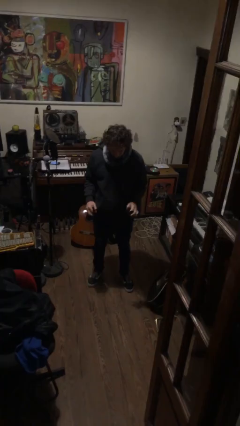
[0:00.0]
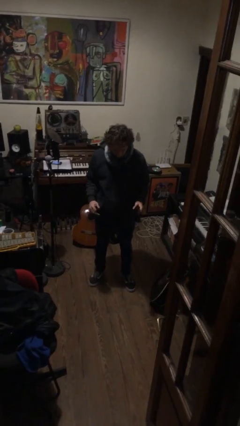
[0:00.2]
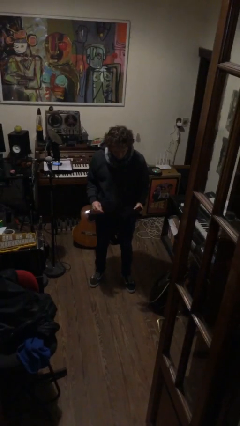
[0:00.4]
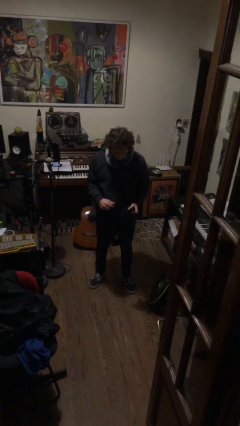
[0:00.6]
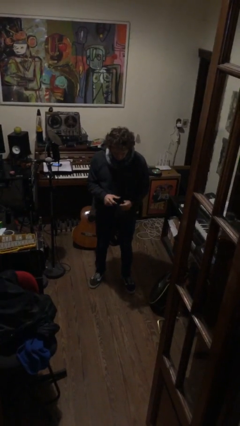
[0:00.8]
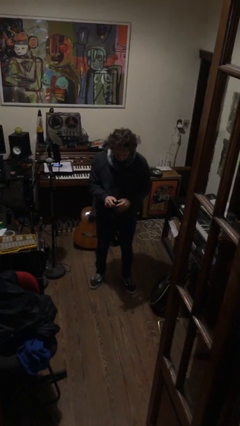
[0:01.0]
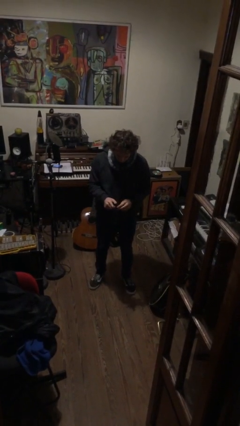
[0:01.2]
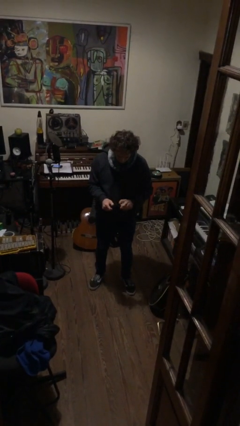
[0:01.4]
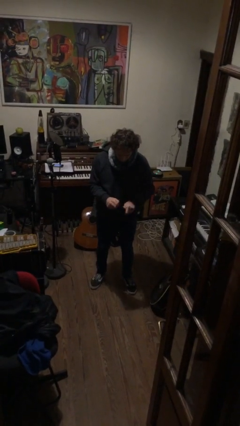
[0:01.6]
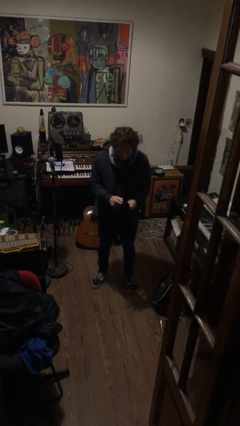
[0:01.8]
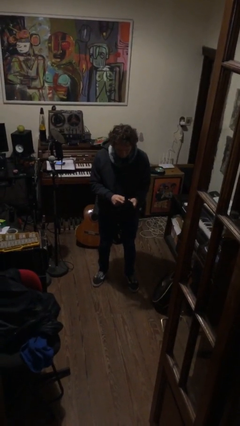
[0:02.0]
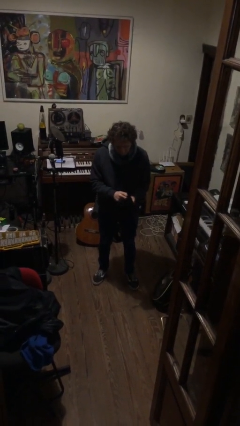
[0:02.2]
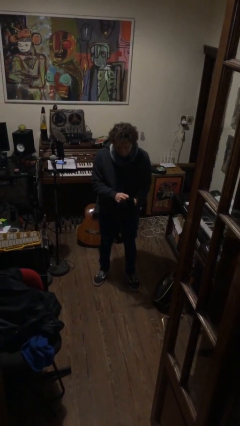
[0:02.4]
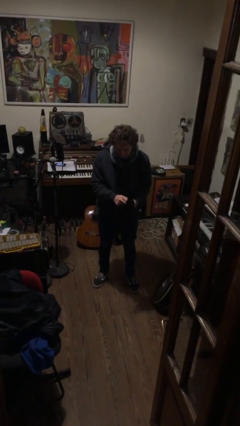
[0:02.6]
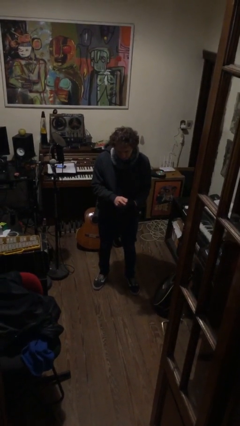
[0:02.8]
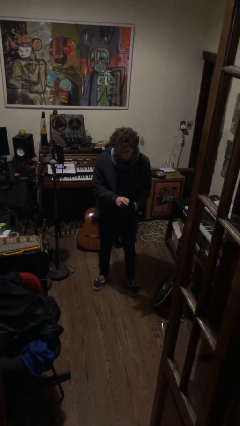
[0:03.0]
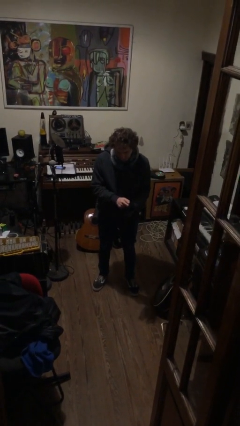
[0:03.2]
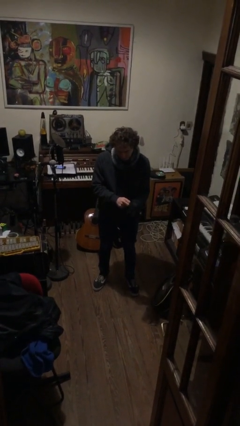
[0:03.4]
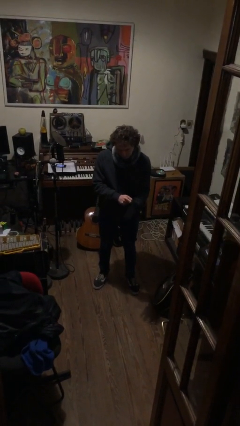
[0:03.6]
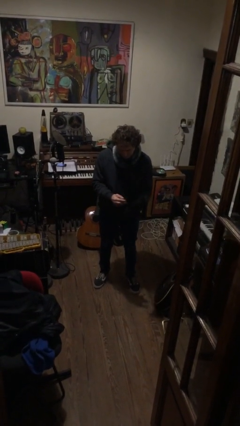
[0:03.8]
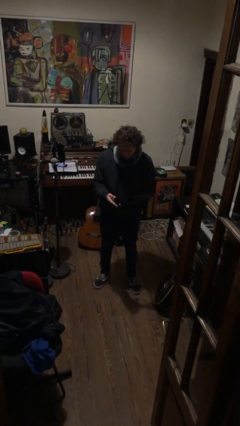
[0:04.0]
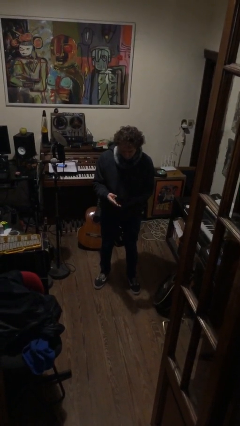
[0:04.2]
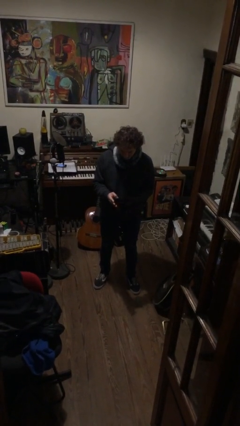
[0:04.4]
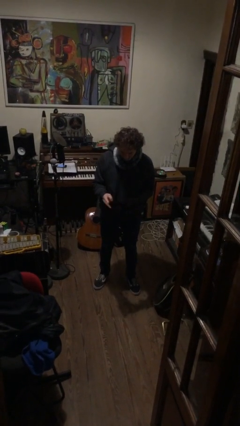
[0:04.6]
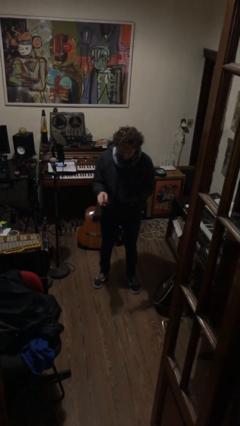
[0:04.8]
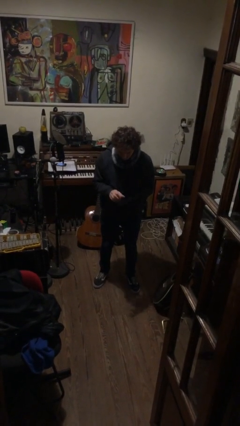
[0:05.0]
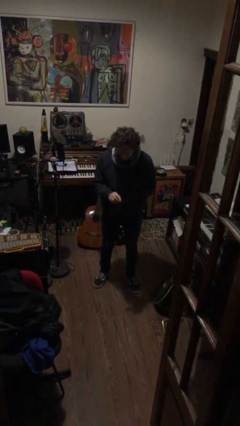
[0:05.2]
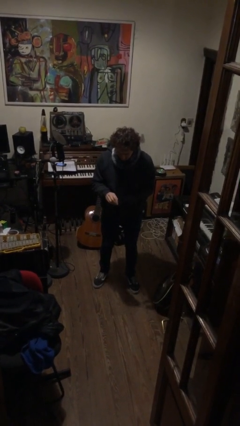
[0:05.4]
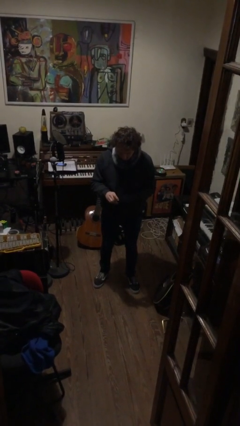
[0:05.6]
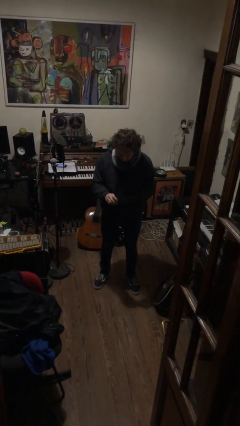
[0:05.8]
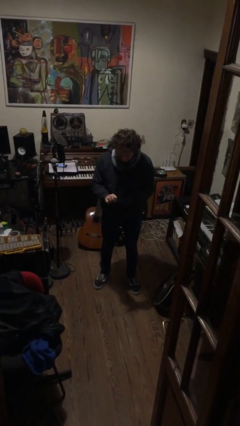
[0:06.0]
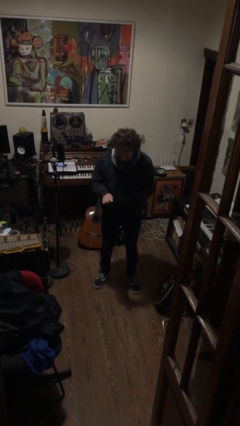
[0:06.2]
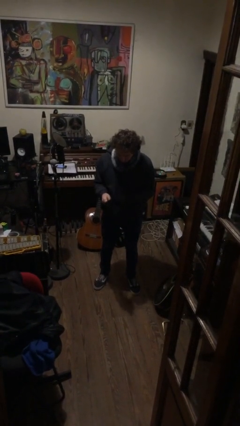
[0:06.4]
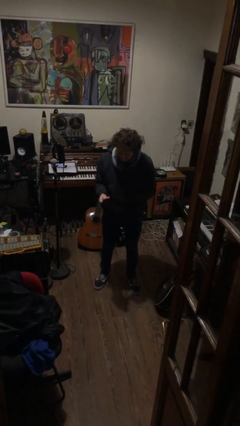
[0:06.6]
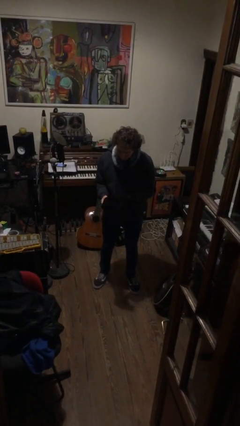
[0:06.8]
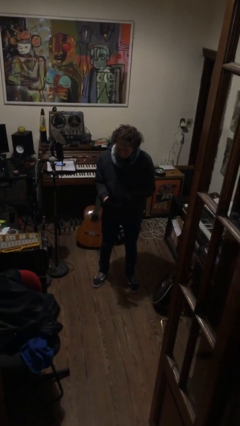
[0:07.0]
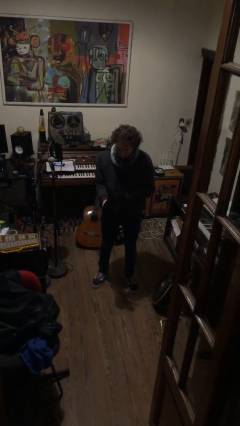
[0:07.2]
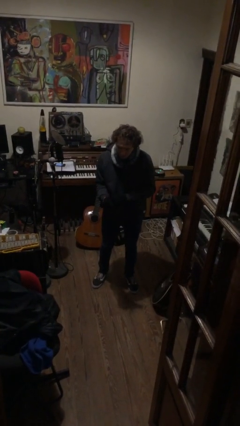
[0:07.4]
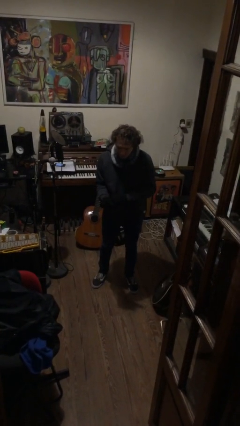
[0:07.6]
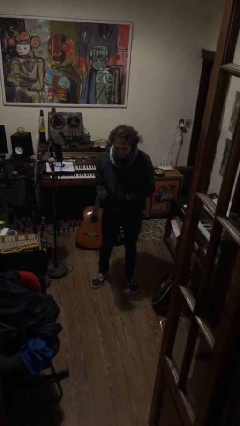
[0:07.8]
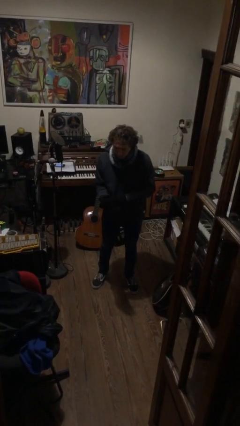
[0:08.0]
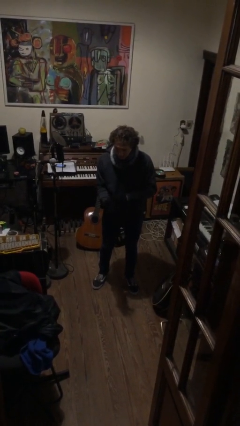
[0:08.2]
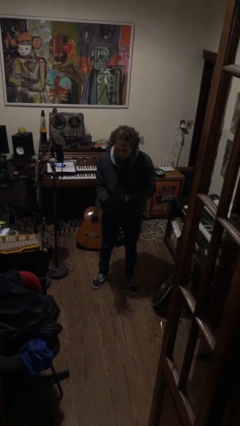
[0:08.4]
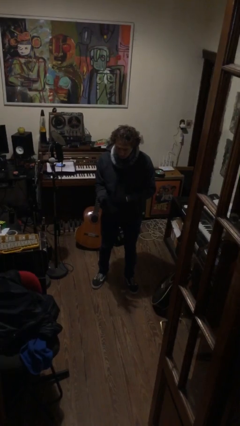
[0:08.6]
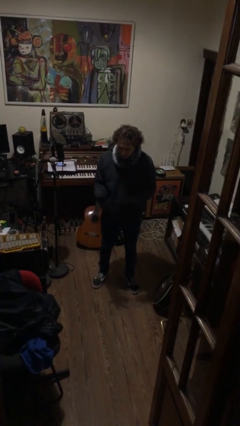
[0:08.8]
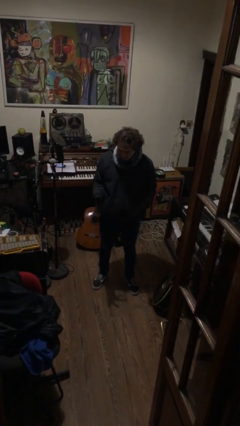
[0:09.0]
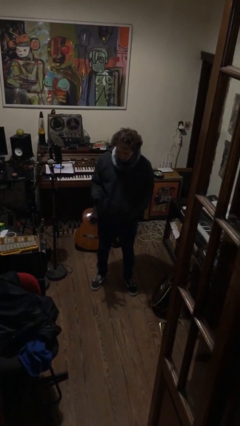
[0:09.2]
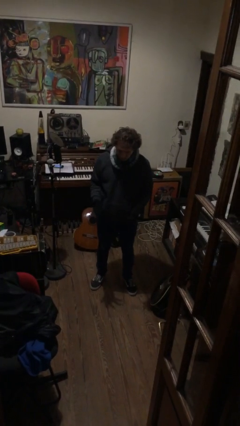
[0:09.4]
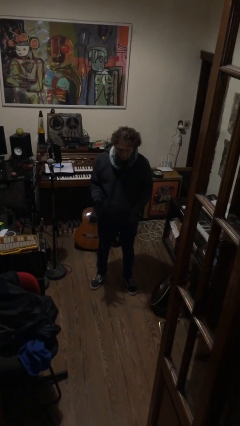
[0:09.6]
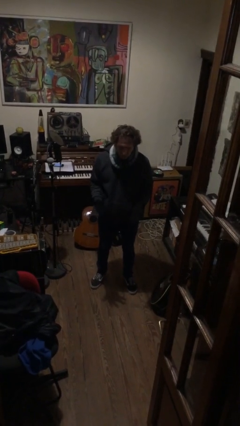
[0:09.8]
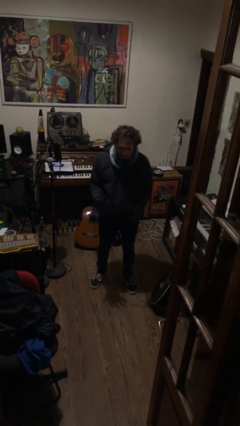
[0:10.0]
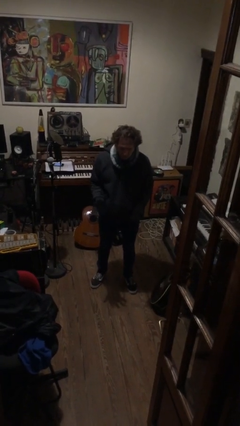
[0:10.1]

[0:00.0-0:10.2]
person puts on gloves

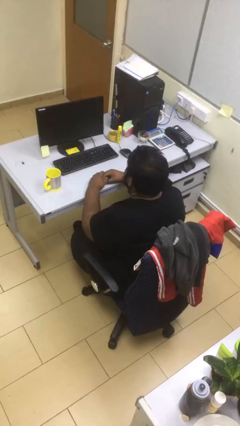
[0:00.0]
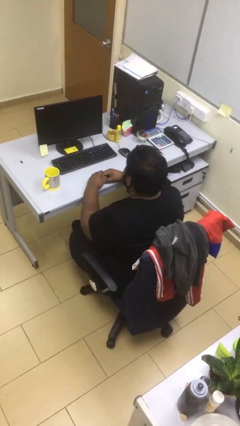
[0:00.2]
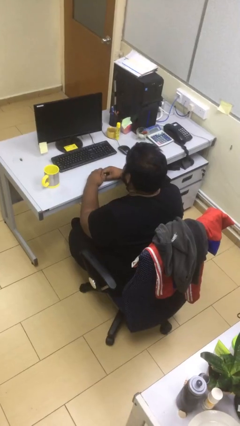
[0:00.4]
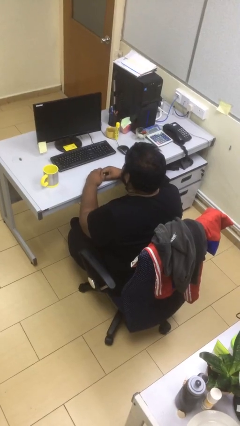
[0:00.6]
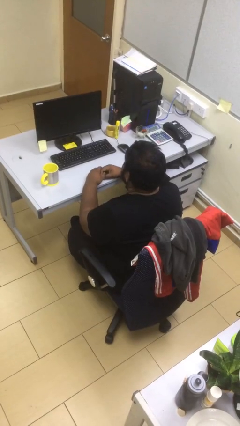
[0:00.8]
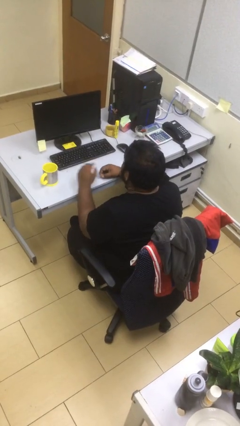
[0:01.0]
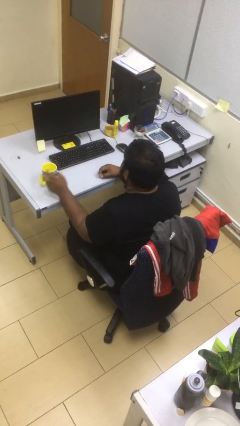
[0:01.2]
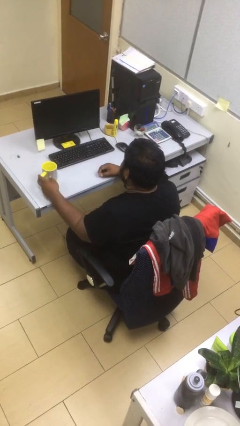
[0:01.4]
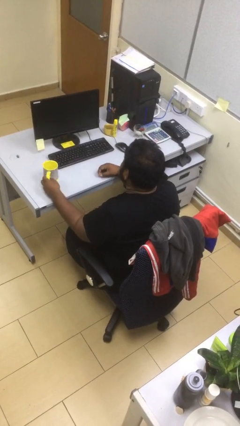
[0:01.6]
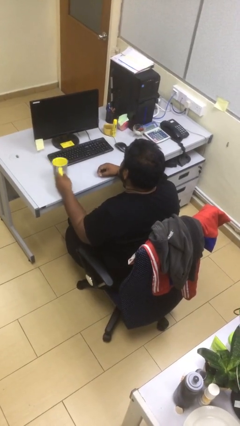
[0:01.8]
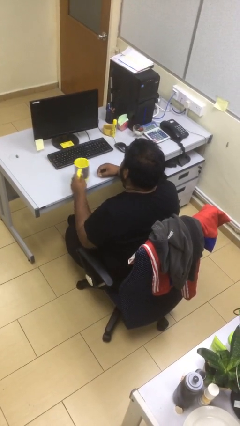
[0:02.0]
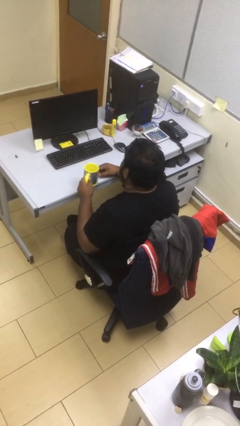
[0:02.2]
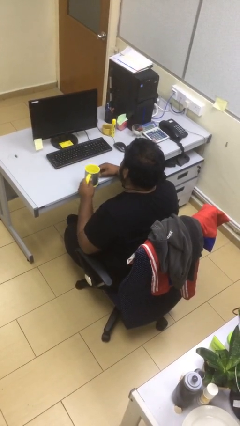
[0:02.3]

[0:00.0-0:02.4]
person picks up object from table

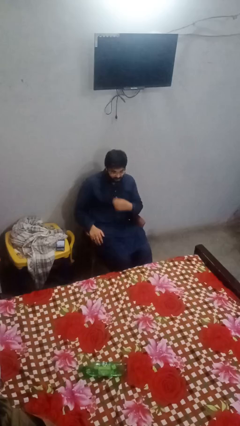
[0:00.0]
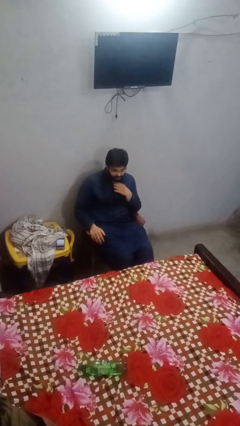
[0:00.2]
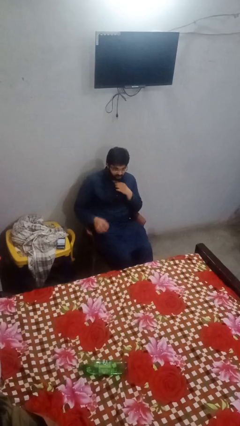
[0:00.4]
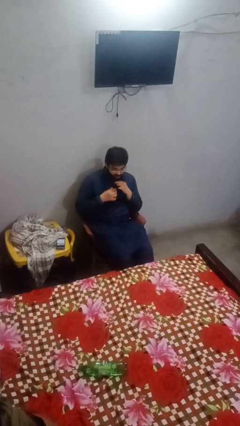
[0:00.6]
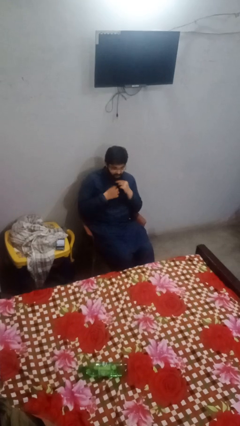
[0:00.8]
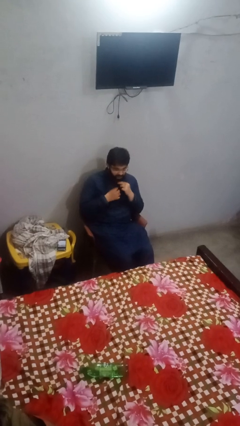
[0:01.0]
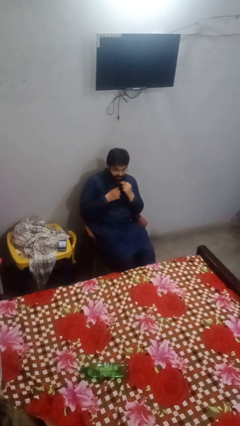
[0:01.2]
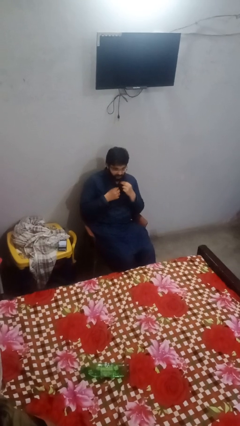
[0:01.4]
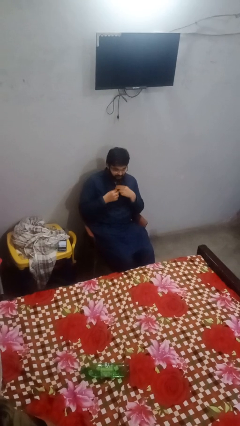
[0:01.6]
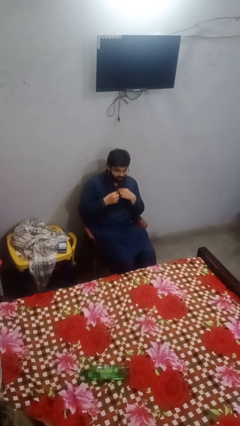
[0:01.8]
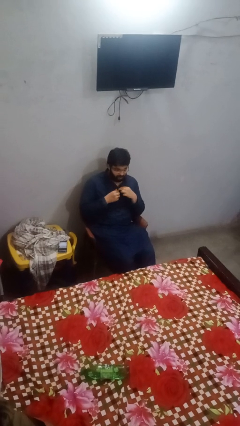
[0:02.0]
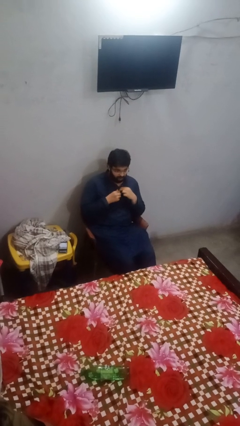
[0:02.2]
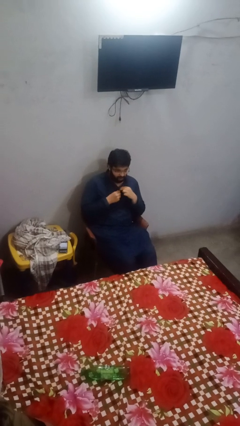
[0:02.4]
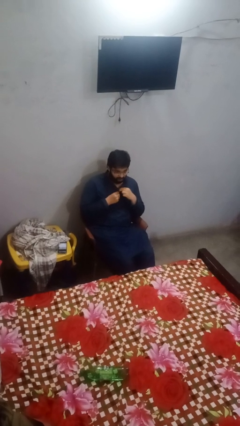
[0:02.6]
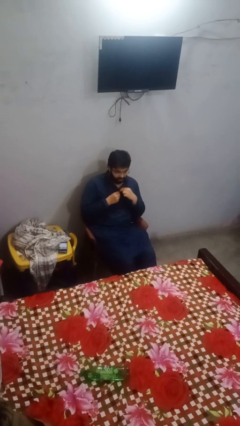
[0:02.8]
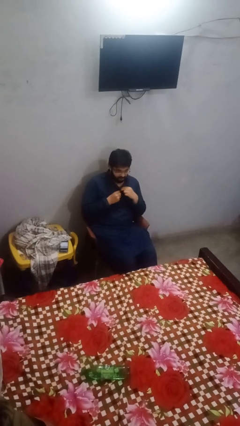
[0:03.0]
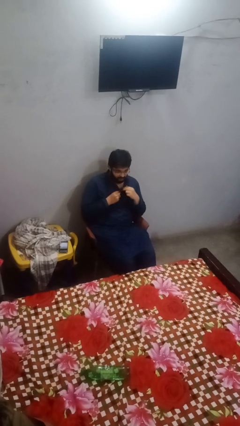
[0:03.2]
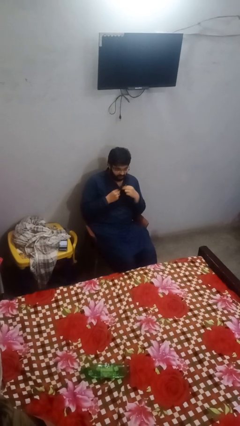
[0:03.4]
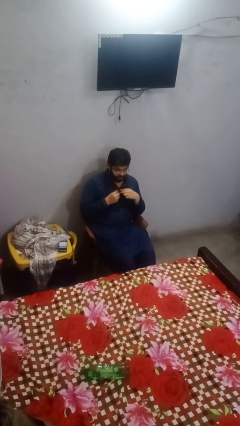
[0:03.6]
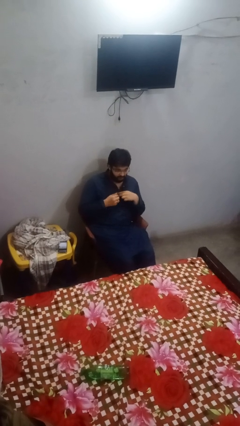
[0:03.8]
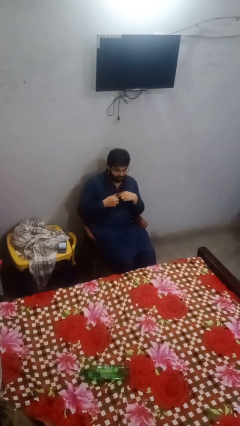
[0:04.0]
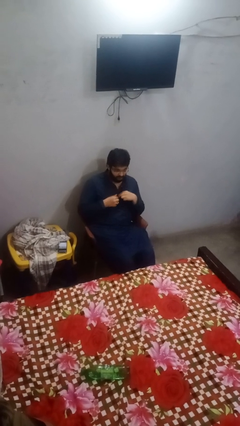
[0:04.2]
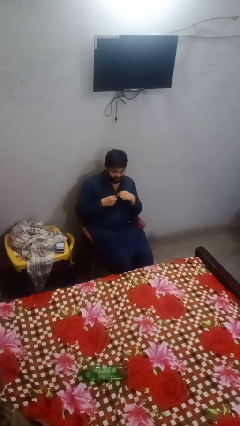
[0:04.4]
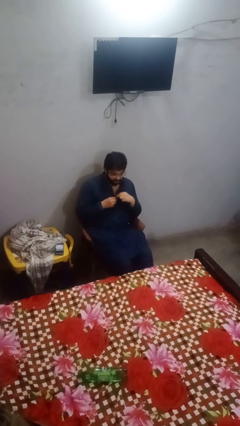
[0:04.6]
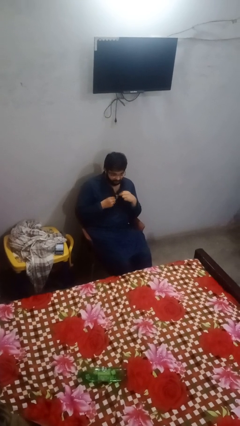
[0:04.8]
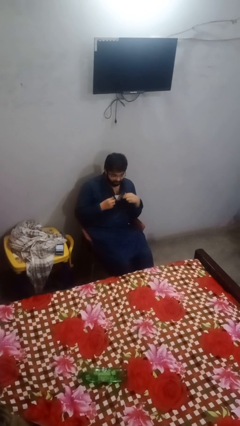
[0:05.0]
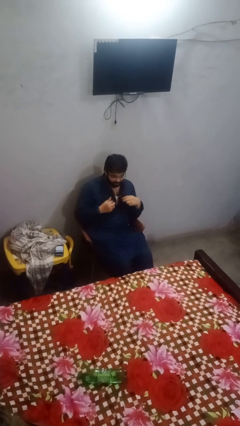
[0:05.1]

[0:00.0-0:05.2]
person unbuttons shirt
